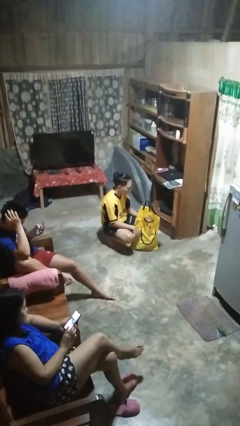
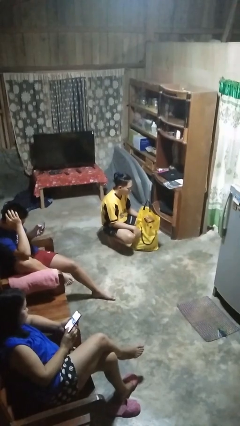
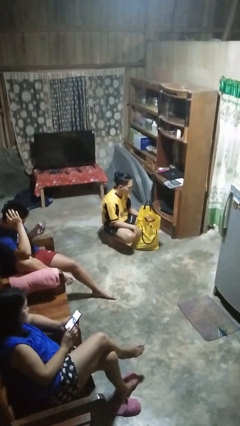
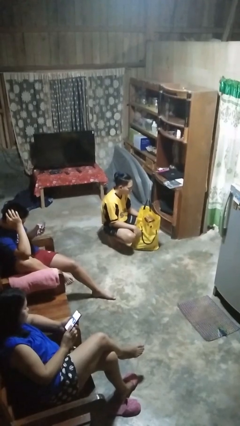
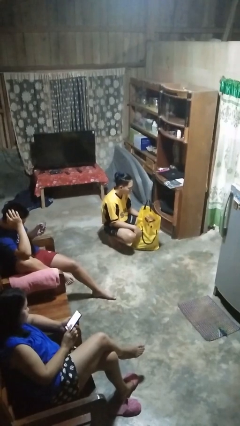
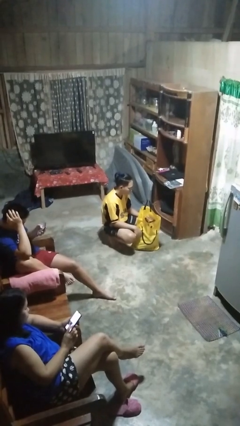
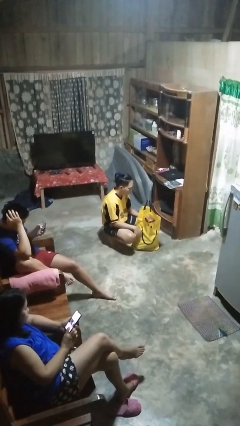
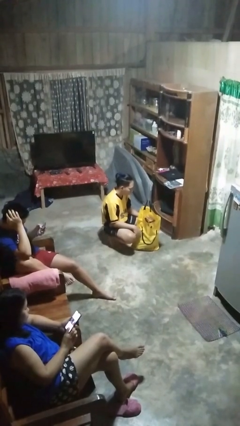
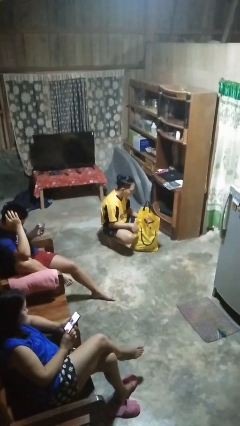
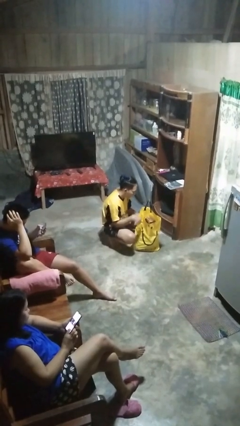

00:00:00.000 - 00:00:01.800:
person searches in bag

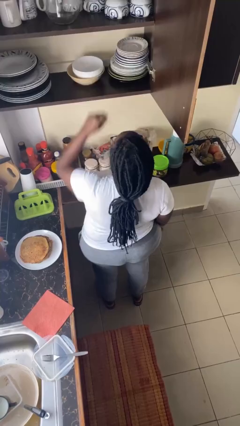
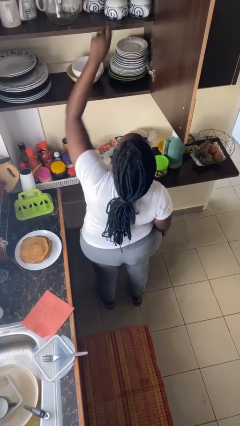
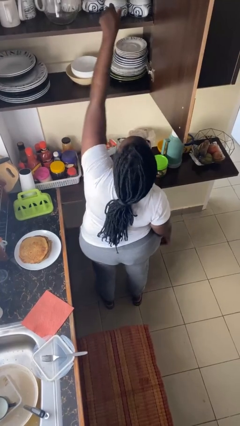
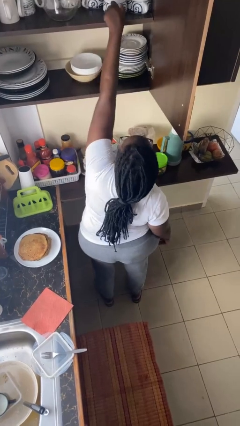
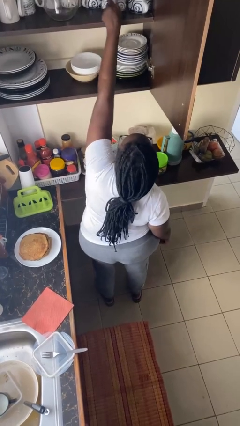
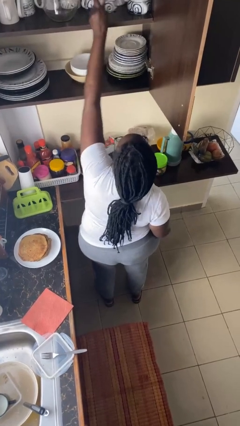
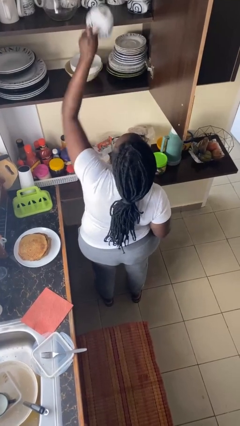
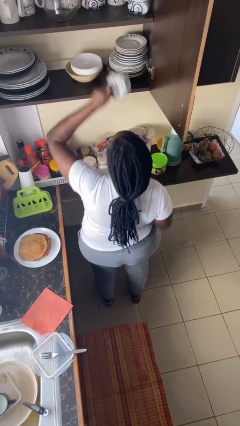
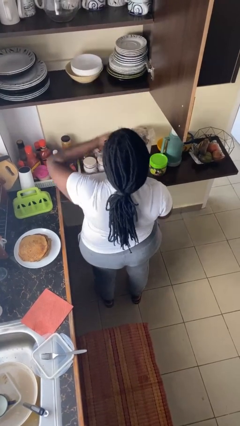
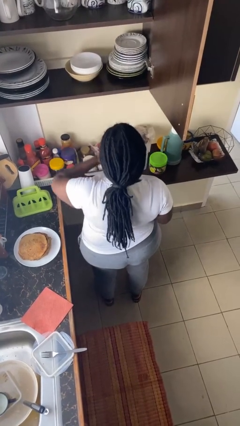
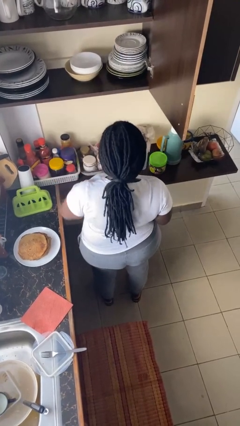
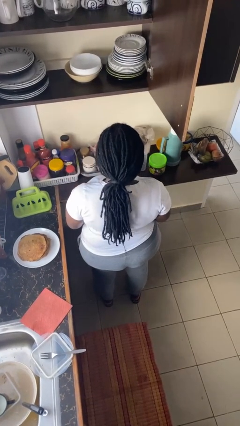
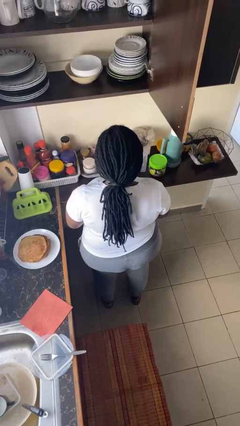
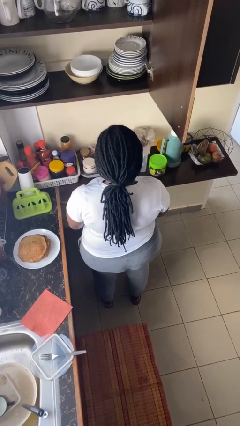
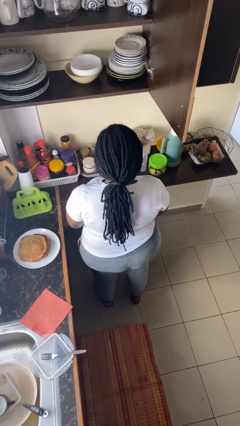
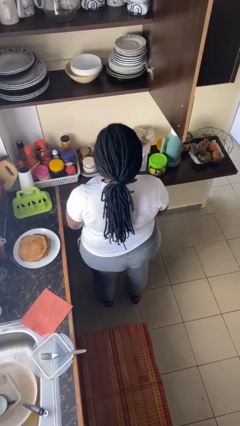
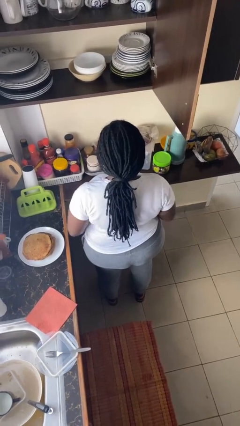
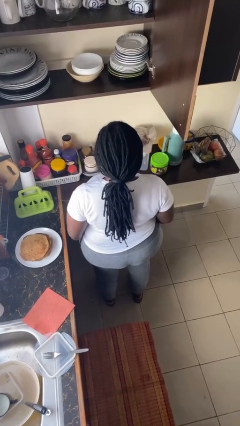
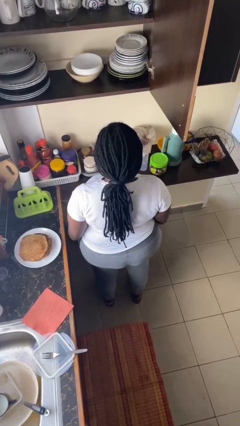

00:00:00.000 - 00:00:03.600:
person takes object from cabinet

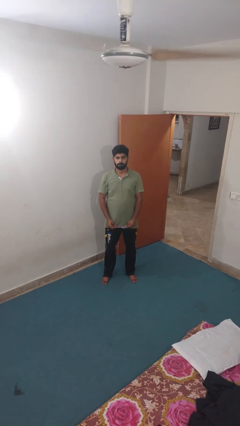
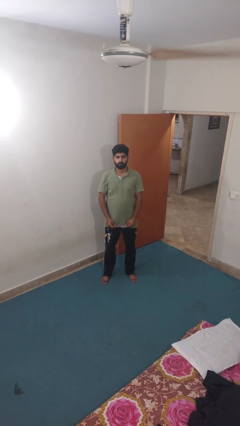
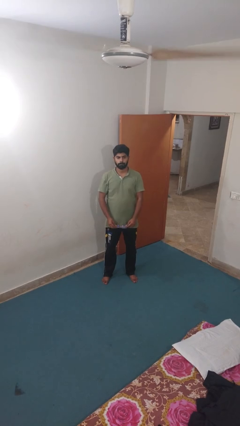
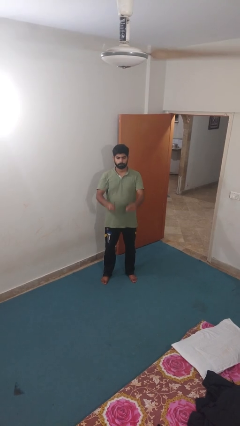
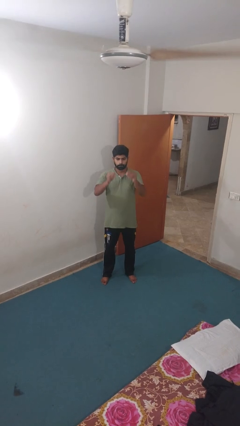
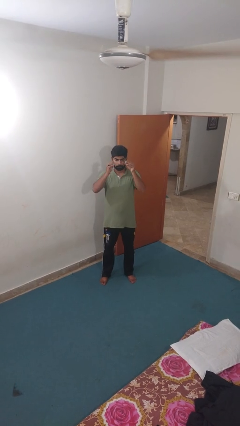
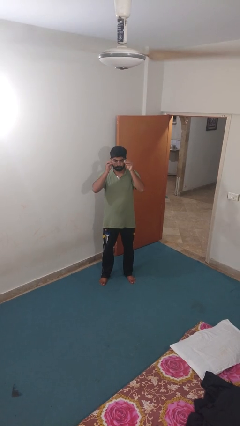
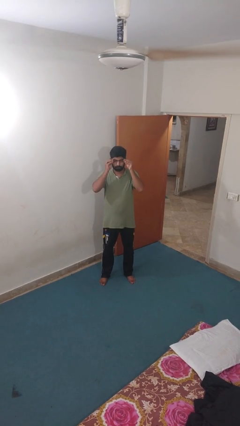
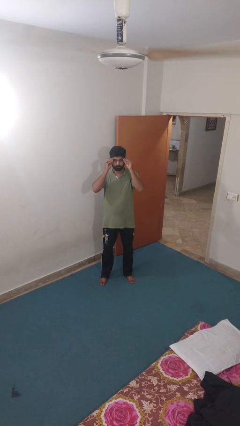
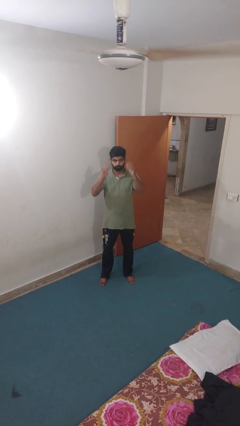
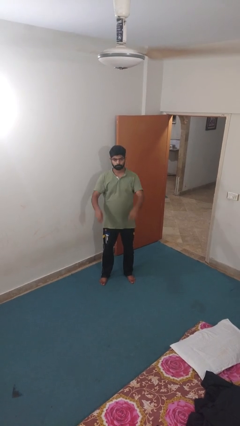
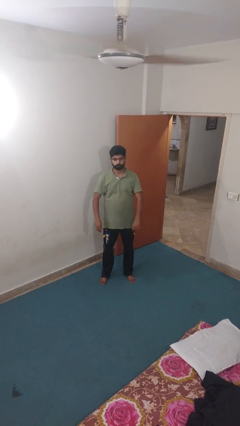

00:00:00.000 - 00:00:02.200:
person puts on glasses

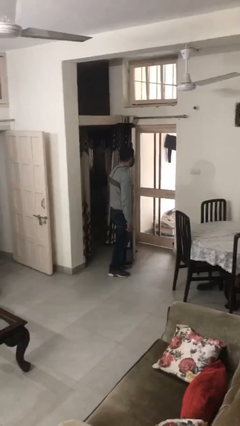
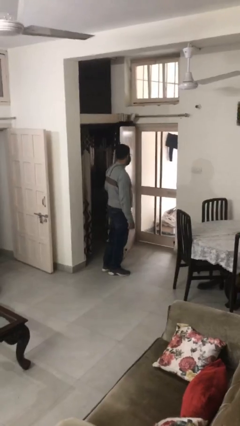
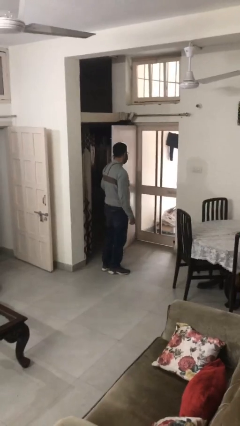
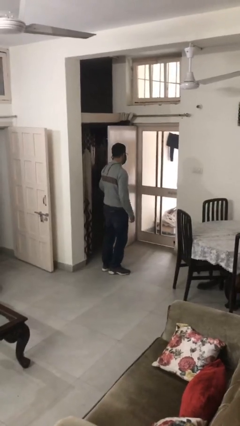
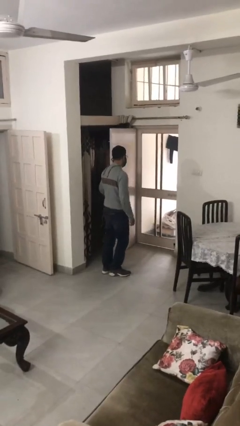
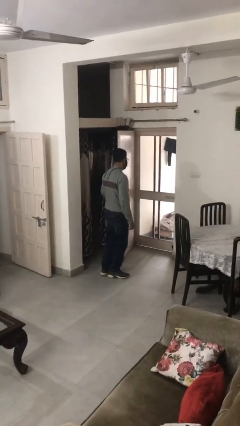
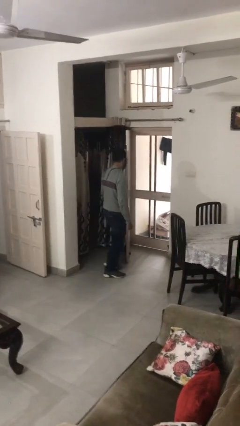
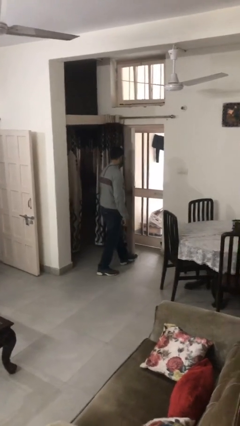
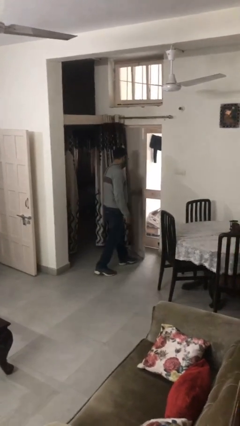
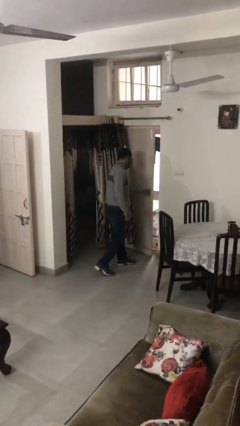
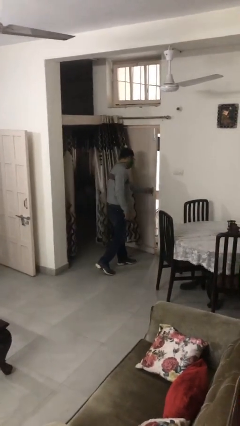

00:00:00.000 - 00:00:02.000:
person closes facility door

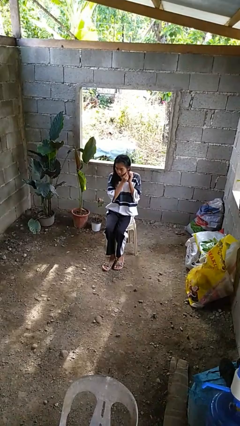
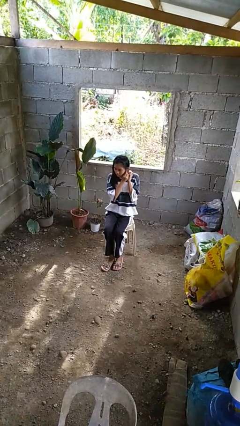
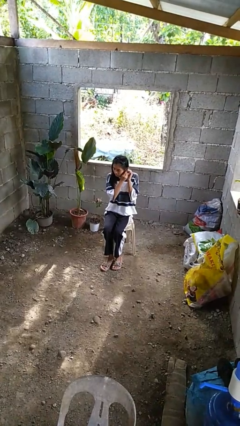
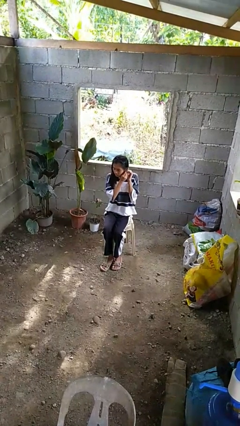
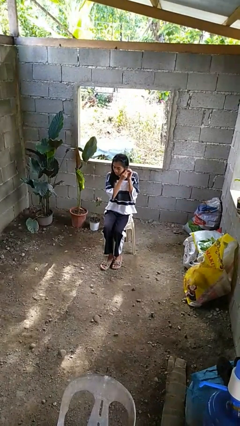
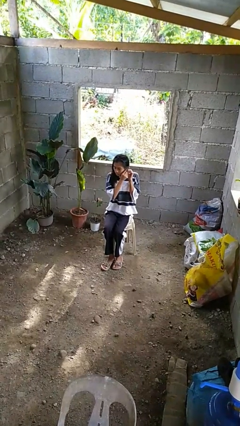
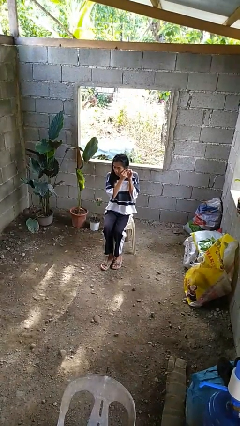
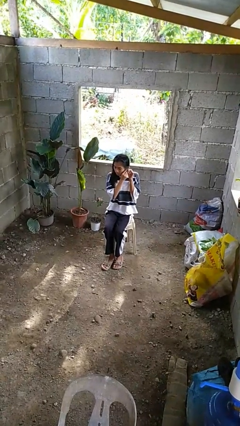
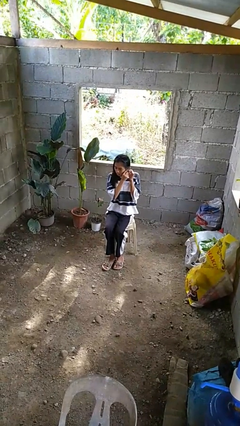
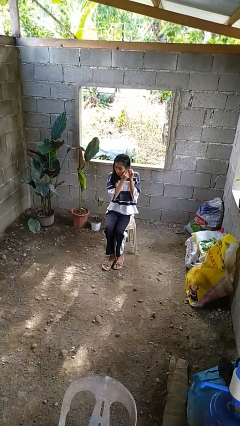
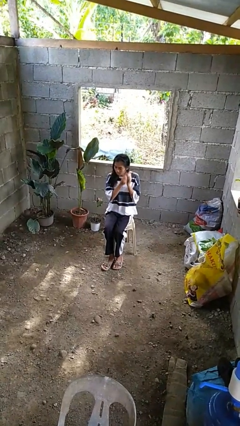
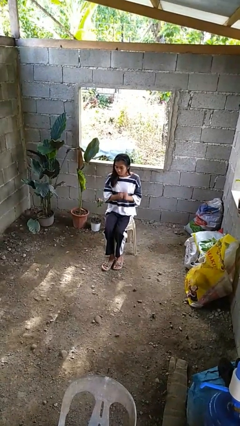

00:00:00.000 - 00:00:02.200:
person puts on earrings

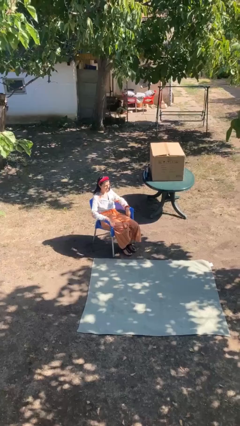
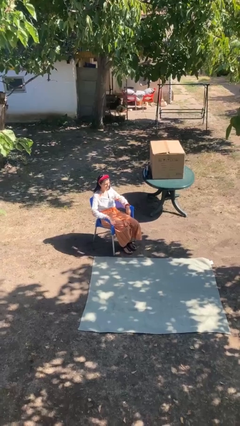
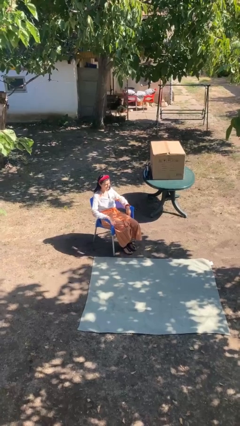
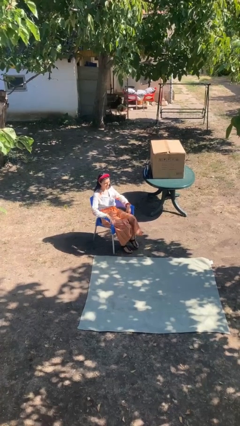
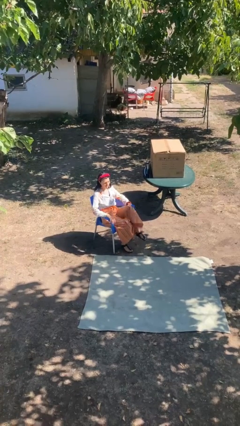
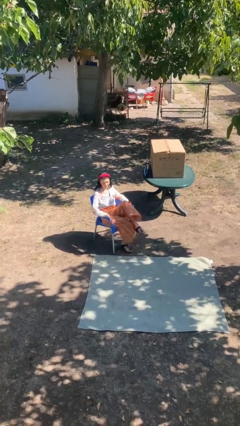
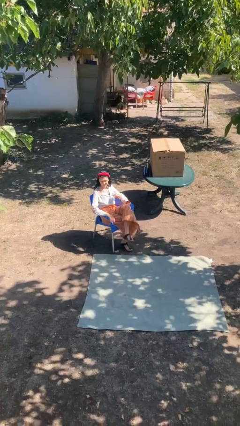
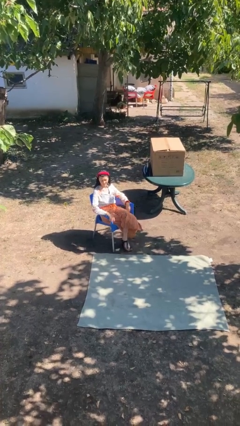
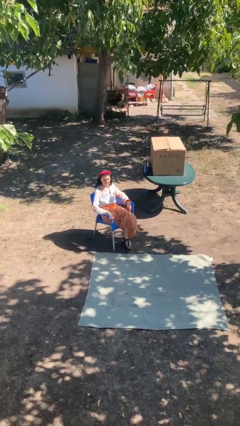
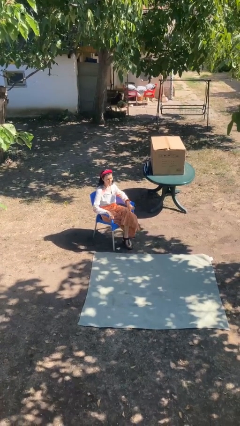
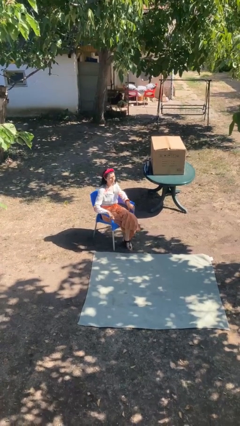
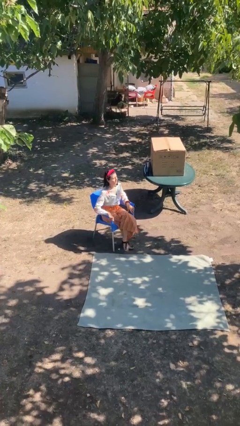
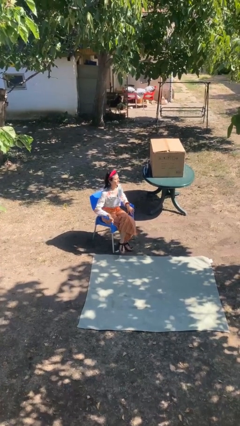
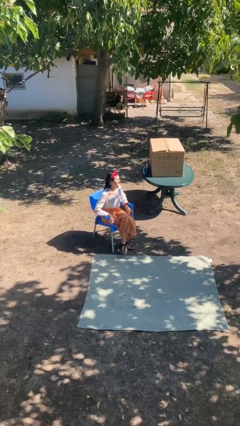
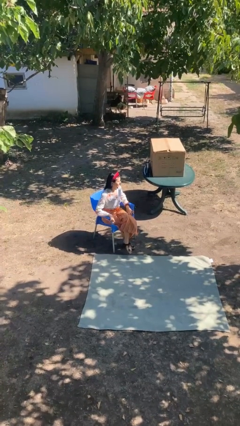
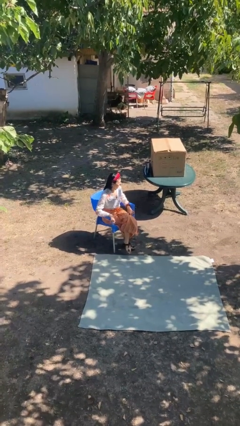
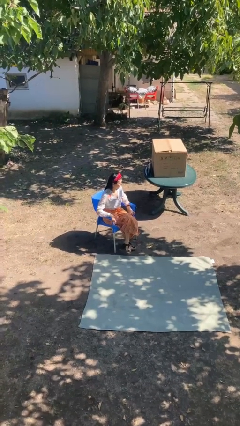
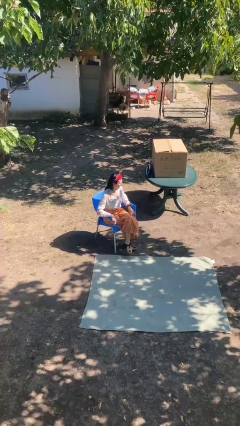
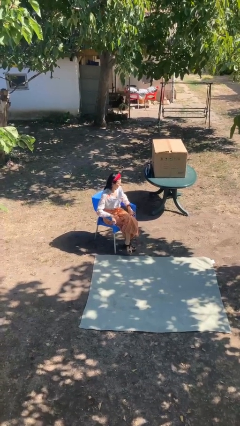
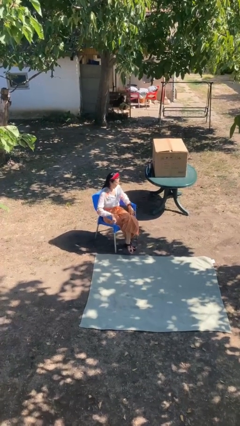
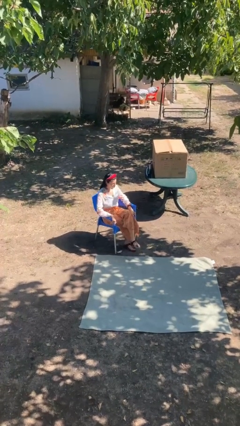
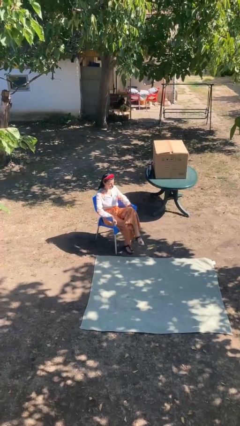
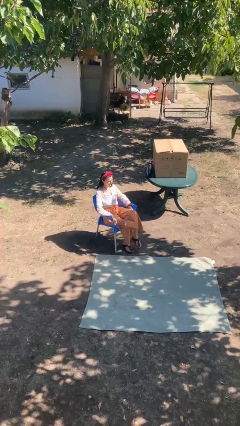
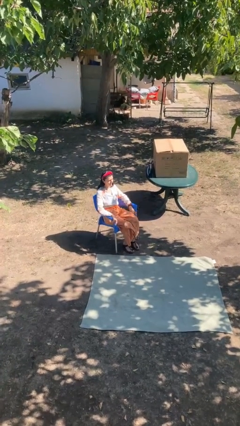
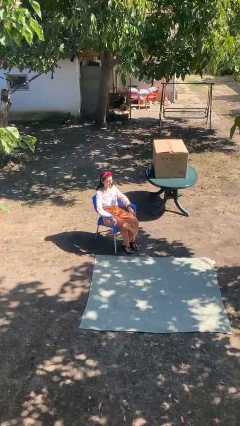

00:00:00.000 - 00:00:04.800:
person crosses legs

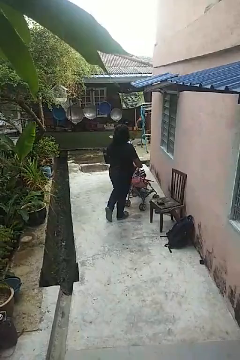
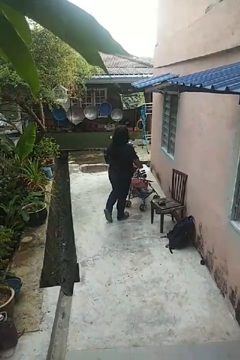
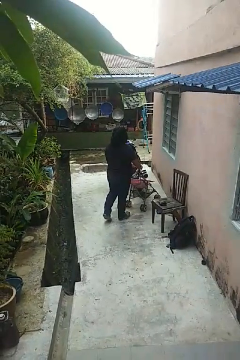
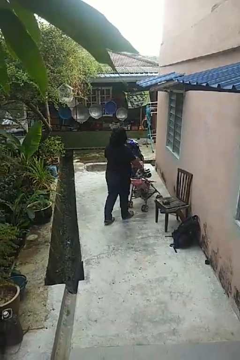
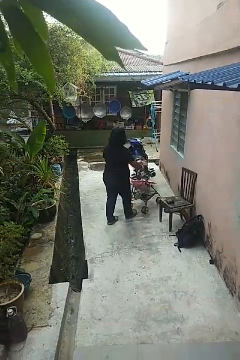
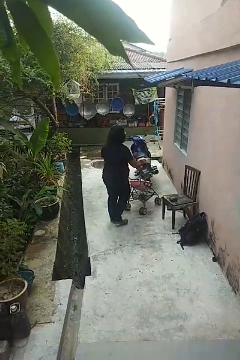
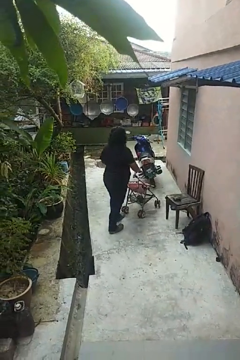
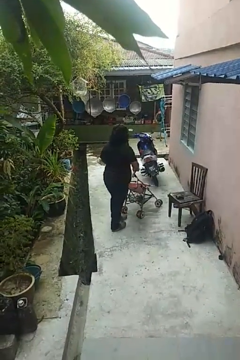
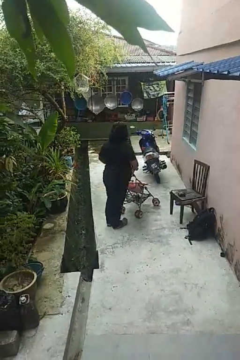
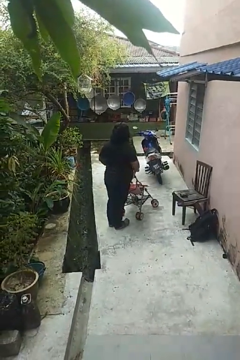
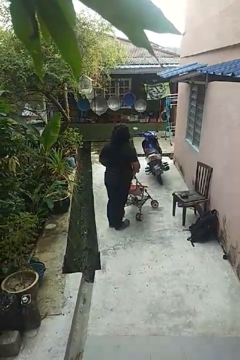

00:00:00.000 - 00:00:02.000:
person pulls wheeled cart
